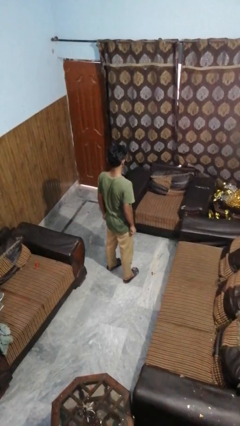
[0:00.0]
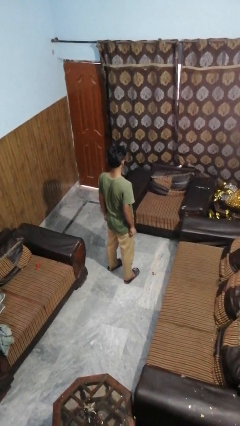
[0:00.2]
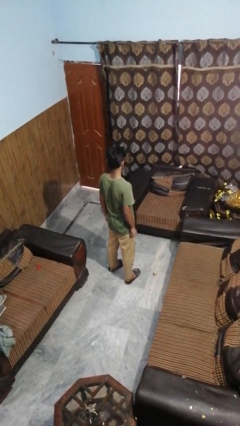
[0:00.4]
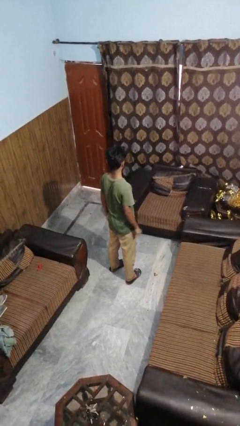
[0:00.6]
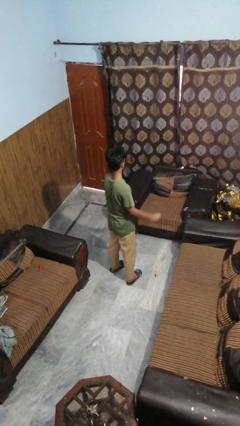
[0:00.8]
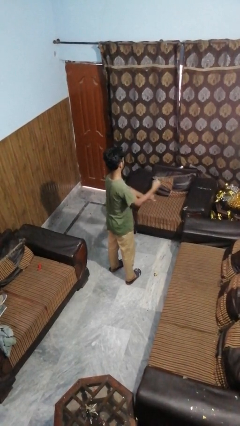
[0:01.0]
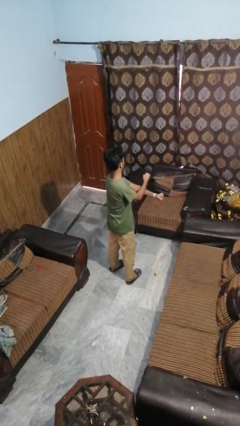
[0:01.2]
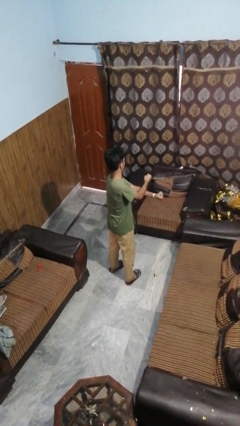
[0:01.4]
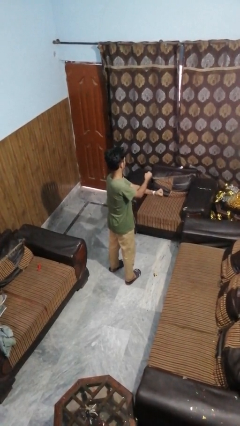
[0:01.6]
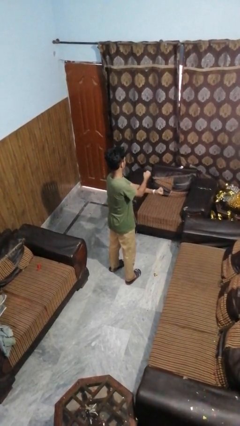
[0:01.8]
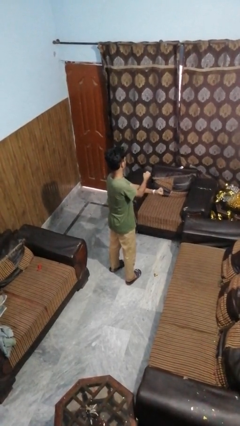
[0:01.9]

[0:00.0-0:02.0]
person gestures arms x

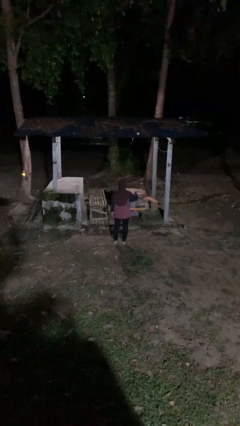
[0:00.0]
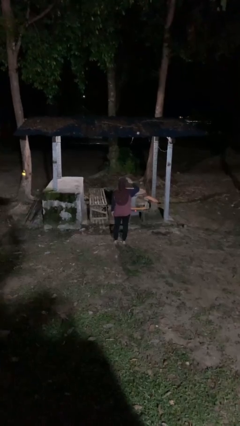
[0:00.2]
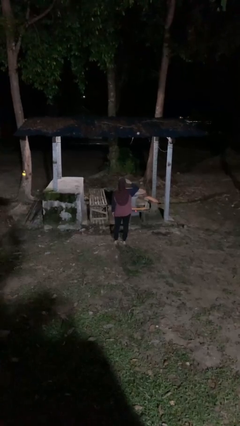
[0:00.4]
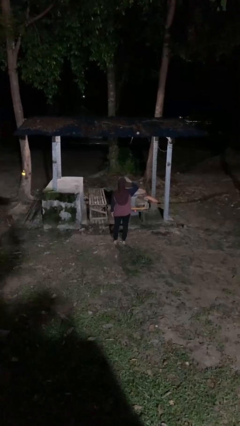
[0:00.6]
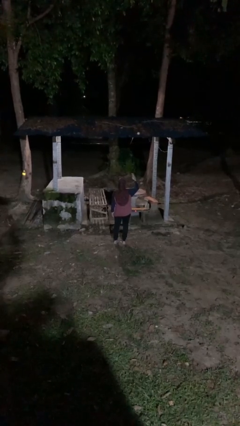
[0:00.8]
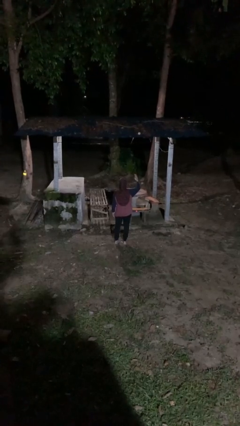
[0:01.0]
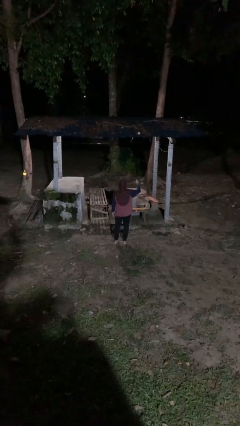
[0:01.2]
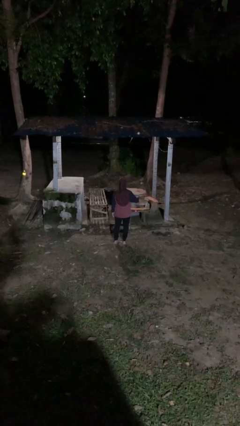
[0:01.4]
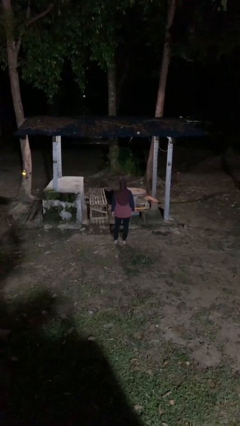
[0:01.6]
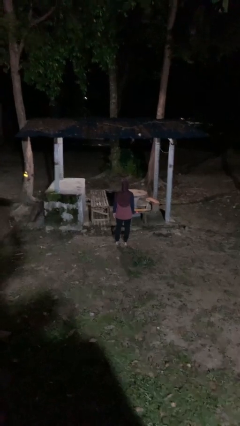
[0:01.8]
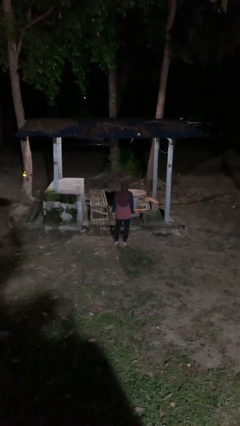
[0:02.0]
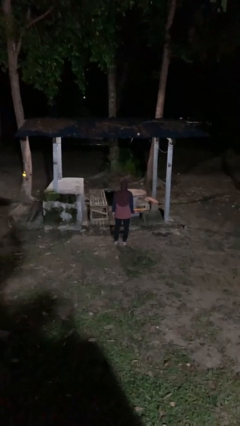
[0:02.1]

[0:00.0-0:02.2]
person salutes

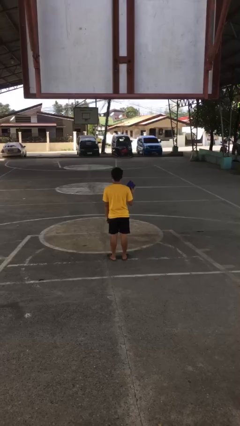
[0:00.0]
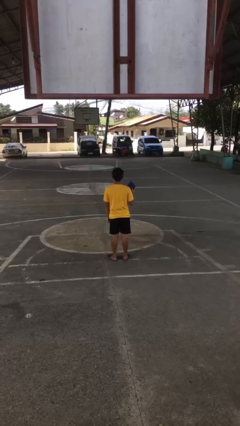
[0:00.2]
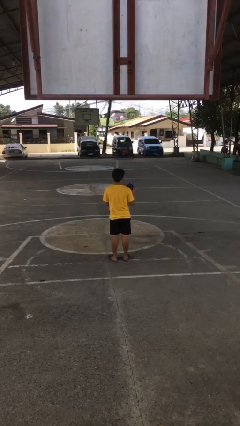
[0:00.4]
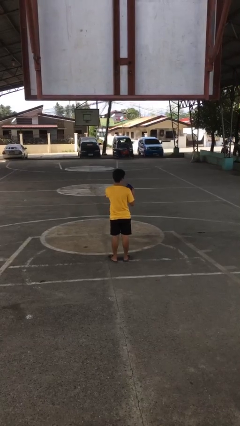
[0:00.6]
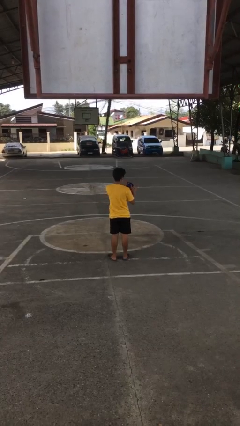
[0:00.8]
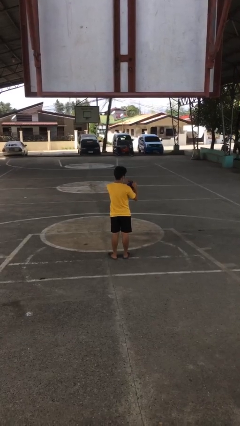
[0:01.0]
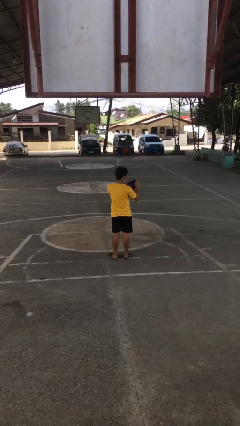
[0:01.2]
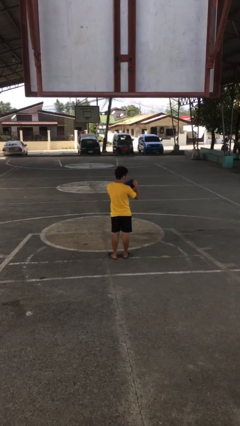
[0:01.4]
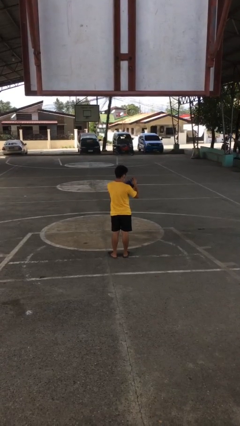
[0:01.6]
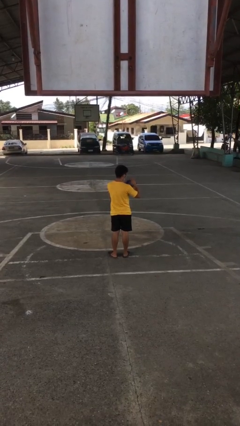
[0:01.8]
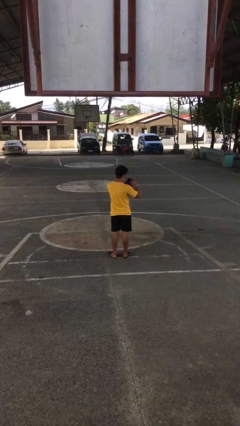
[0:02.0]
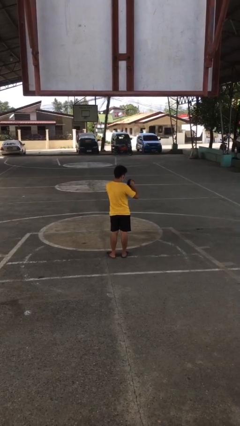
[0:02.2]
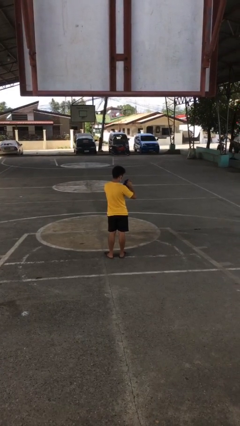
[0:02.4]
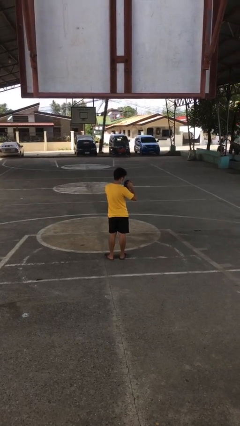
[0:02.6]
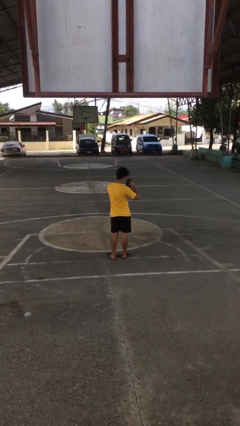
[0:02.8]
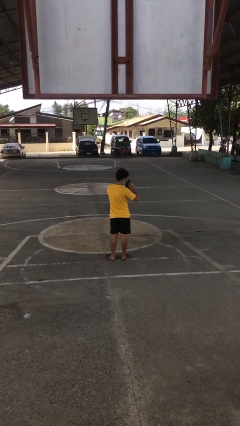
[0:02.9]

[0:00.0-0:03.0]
person searches in purse

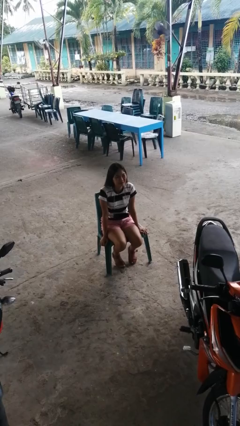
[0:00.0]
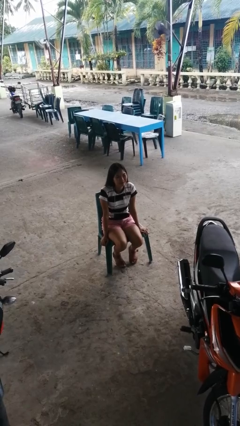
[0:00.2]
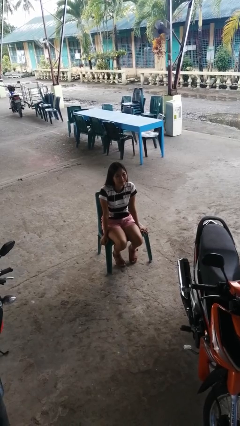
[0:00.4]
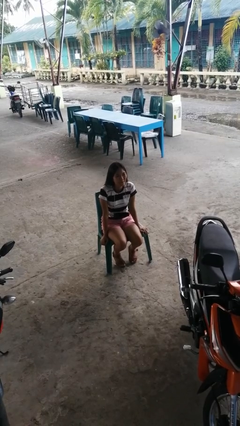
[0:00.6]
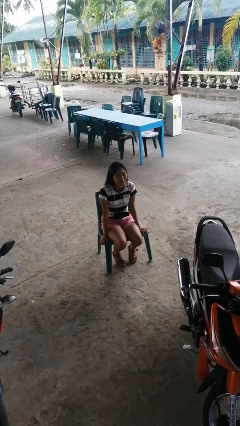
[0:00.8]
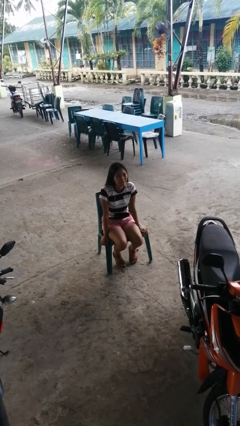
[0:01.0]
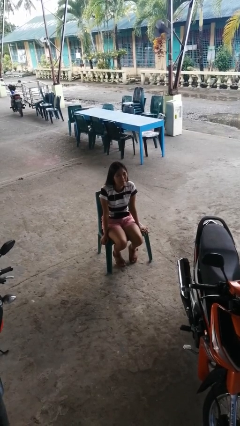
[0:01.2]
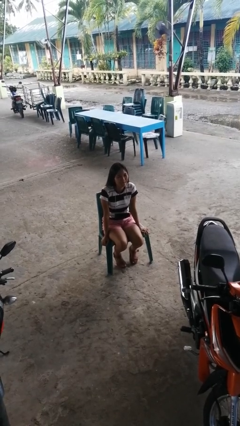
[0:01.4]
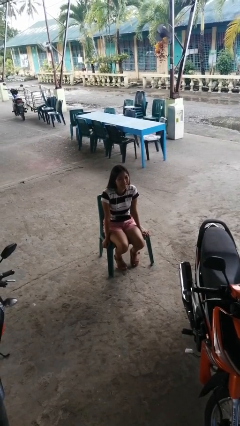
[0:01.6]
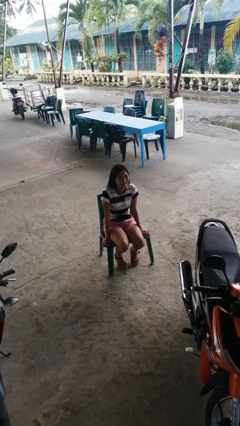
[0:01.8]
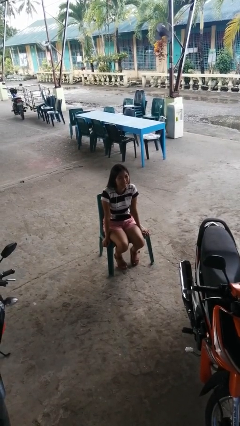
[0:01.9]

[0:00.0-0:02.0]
person sticks out tongue

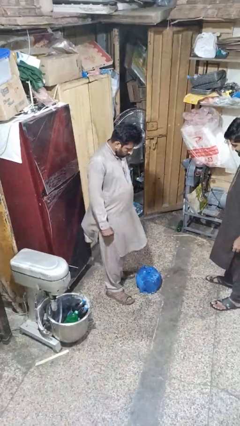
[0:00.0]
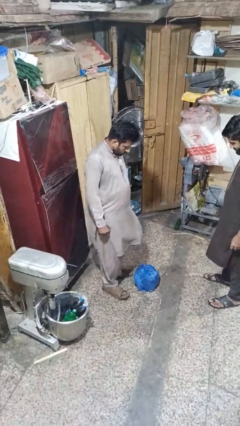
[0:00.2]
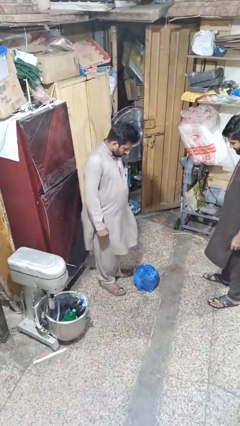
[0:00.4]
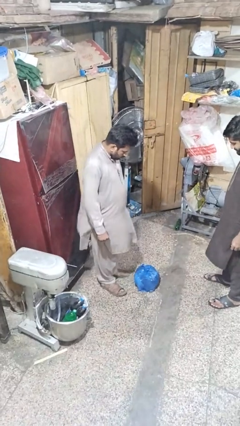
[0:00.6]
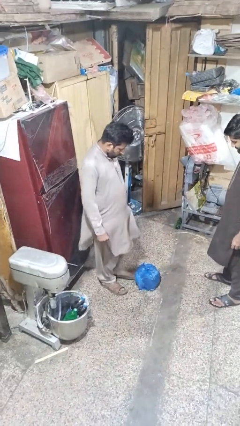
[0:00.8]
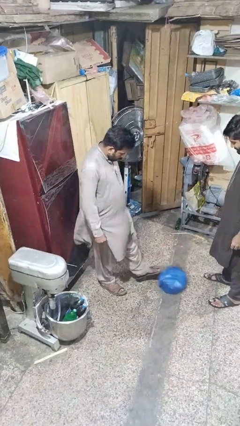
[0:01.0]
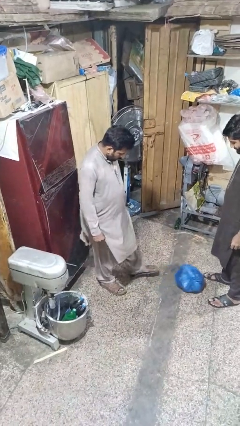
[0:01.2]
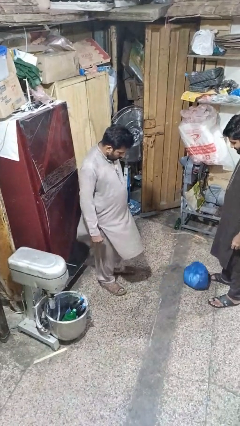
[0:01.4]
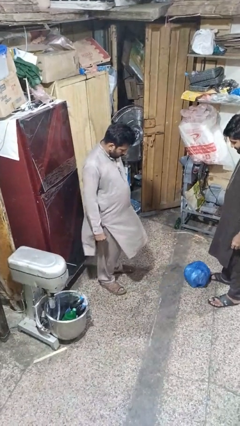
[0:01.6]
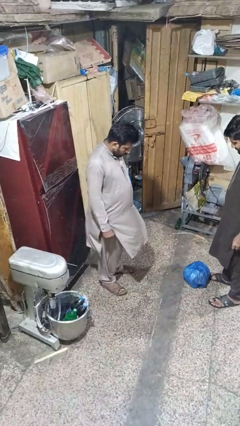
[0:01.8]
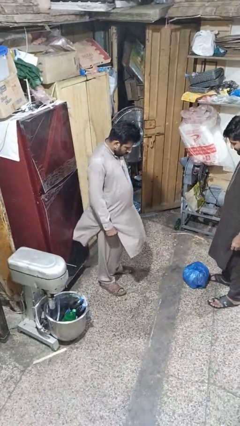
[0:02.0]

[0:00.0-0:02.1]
person kicks object to person

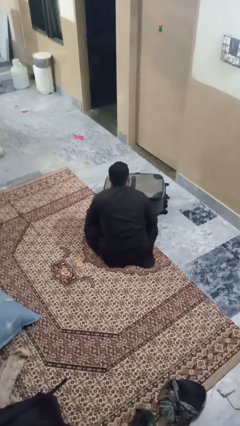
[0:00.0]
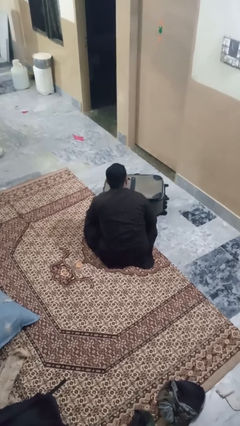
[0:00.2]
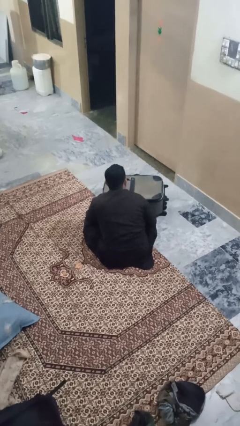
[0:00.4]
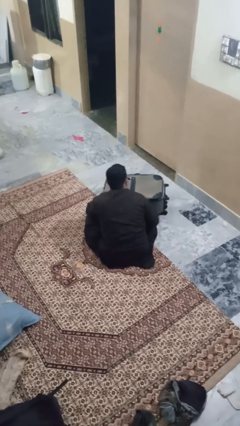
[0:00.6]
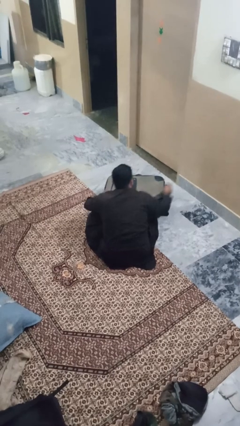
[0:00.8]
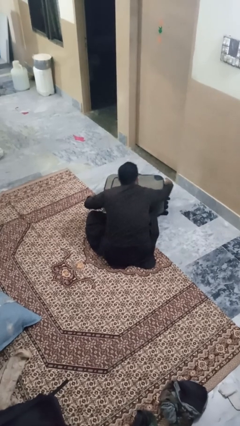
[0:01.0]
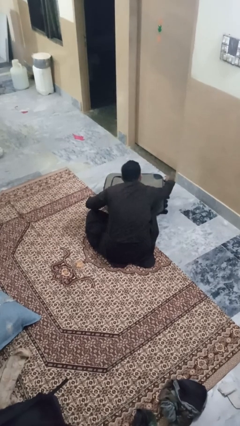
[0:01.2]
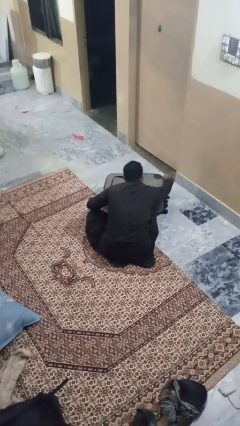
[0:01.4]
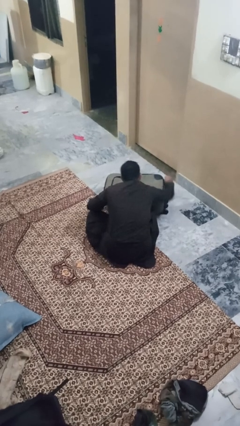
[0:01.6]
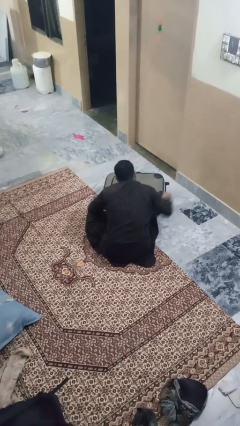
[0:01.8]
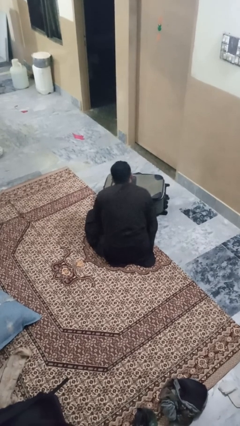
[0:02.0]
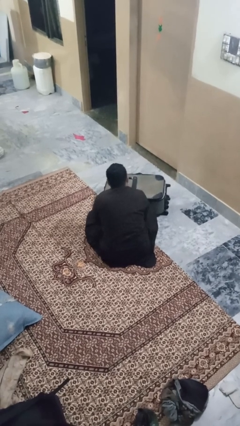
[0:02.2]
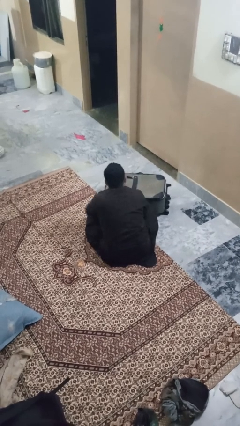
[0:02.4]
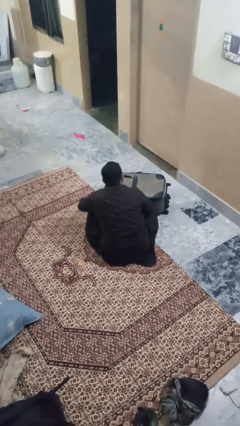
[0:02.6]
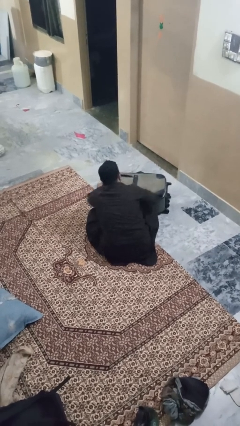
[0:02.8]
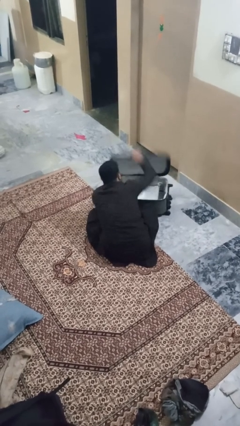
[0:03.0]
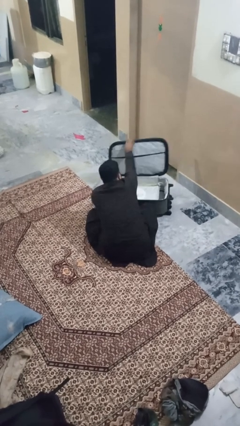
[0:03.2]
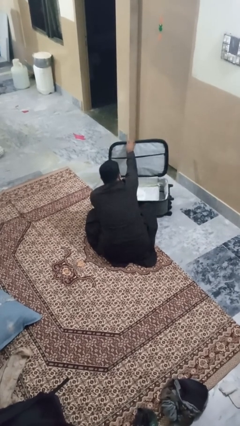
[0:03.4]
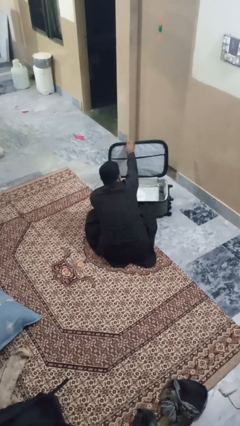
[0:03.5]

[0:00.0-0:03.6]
person opens suitcase

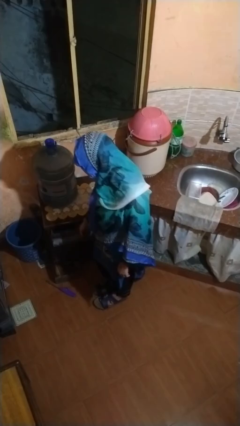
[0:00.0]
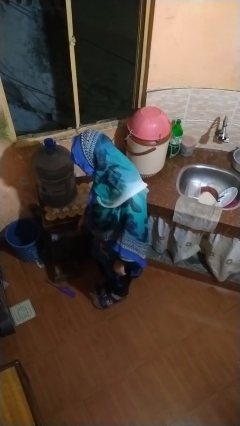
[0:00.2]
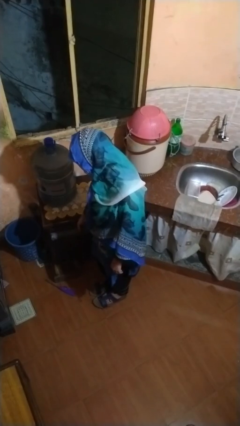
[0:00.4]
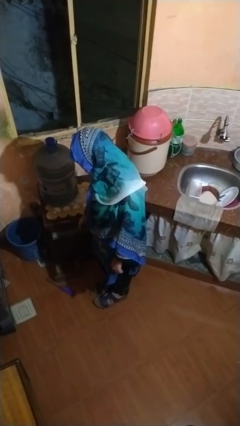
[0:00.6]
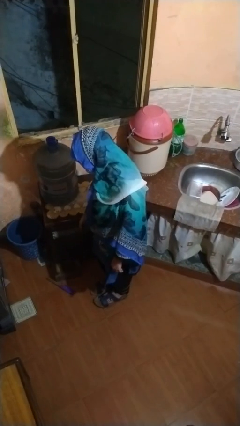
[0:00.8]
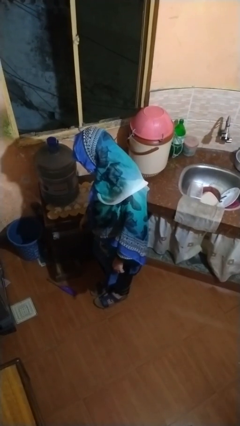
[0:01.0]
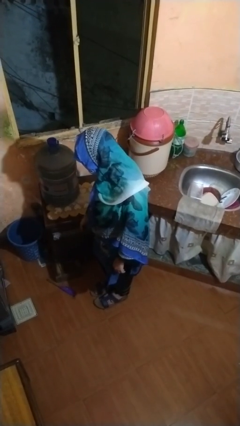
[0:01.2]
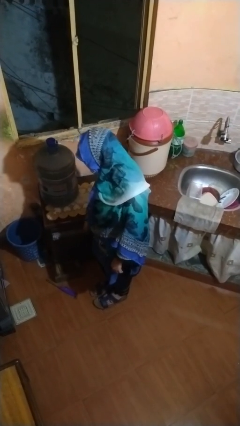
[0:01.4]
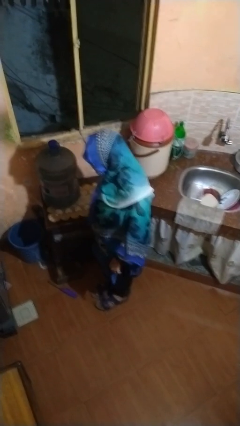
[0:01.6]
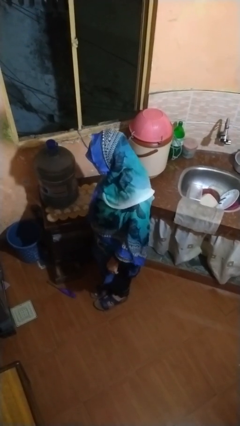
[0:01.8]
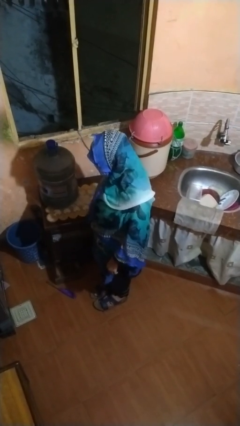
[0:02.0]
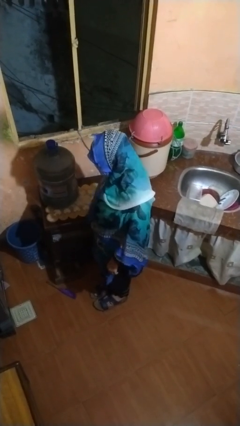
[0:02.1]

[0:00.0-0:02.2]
person closes kitchen drawer

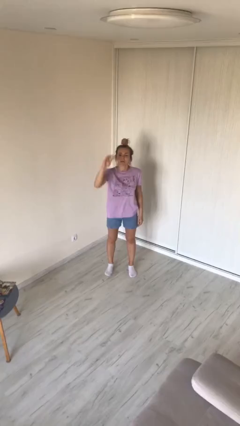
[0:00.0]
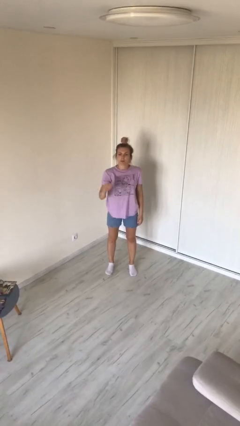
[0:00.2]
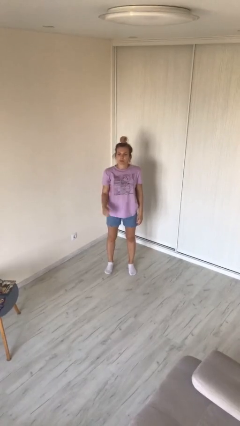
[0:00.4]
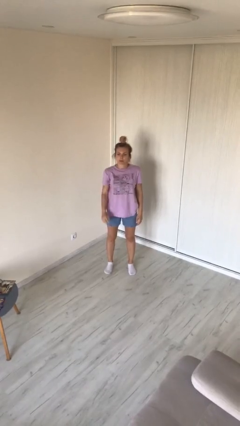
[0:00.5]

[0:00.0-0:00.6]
person gestures lower hand
